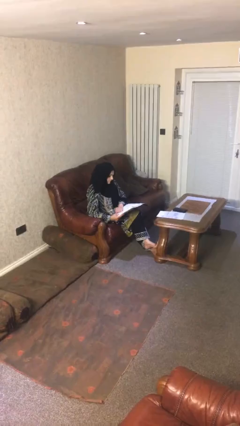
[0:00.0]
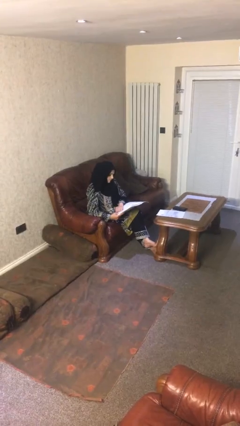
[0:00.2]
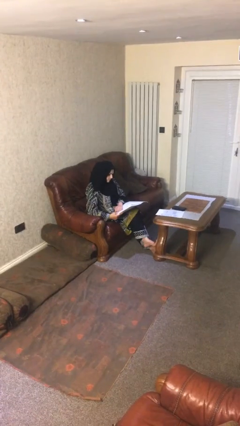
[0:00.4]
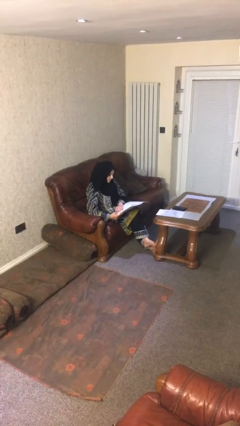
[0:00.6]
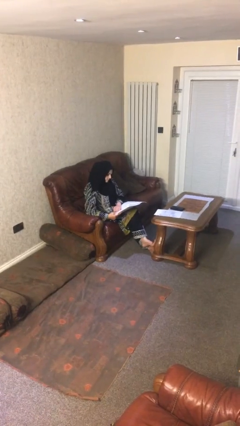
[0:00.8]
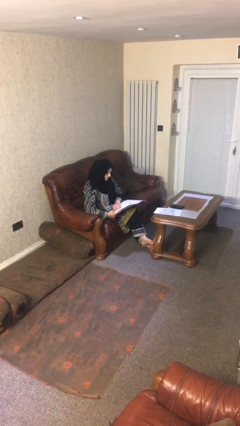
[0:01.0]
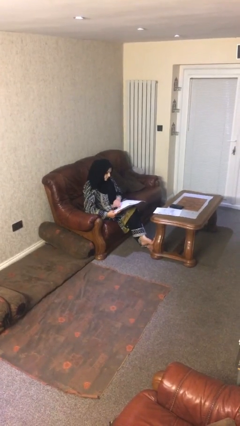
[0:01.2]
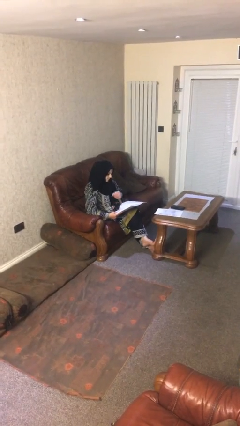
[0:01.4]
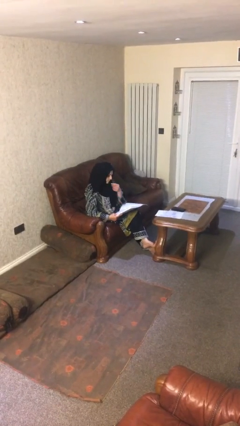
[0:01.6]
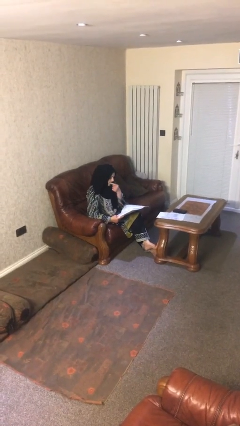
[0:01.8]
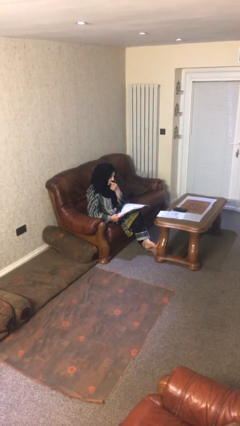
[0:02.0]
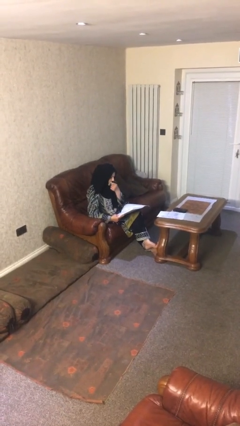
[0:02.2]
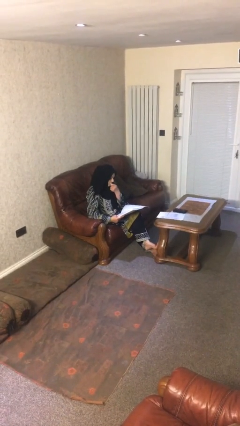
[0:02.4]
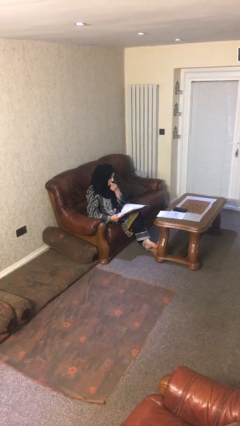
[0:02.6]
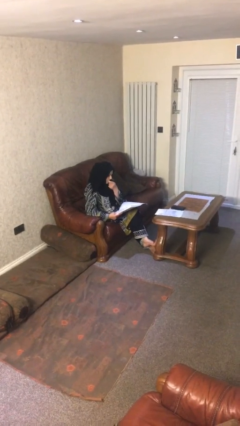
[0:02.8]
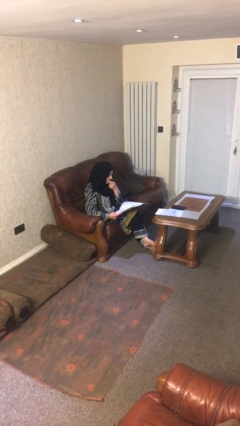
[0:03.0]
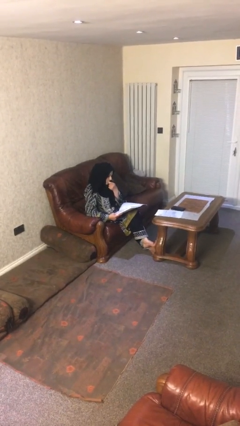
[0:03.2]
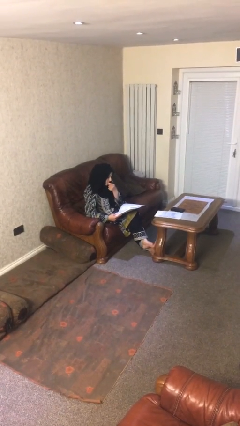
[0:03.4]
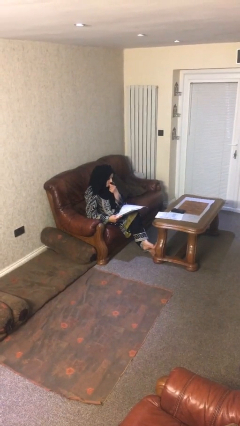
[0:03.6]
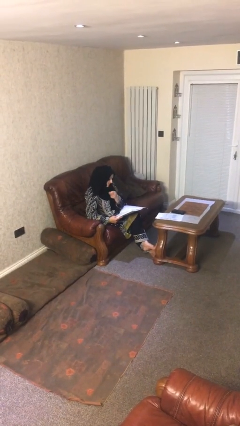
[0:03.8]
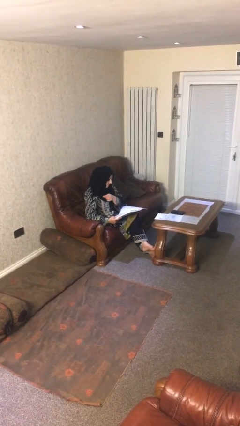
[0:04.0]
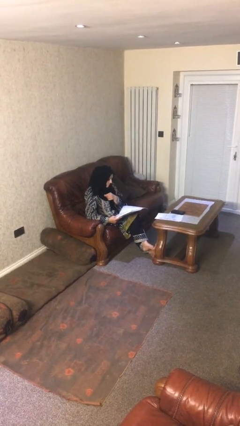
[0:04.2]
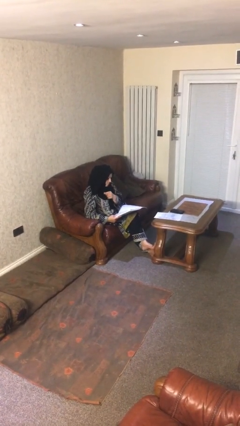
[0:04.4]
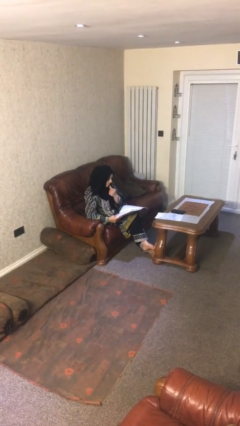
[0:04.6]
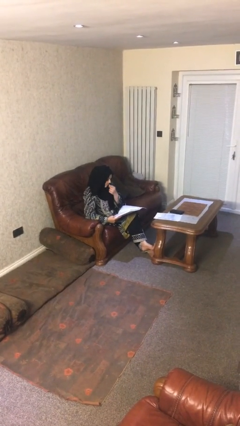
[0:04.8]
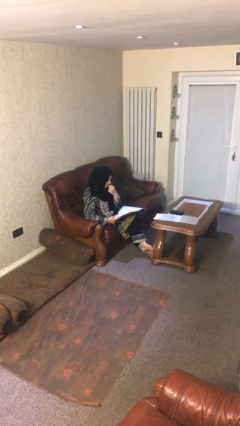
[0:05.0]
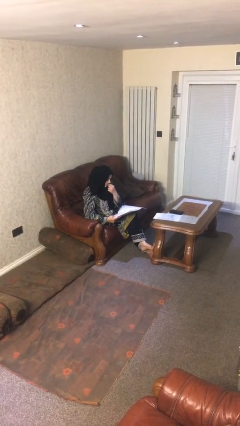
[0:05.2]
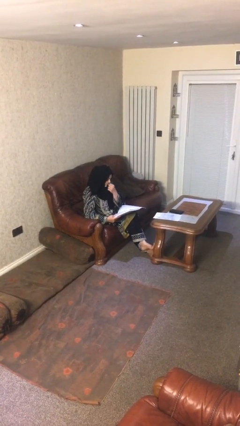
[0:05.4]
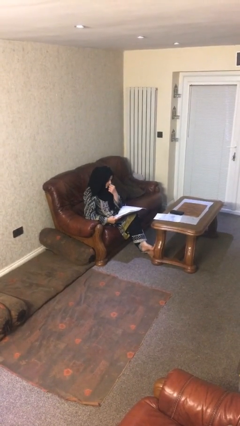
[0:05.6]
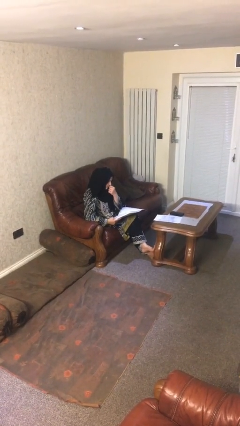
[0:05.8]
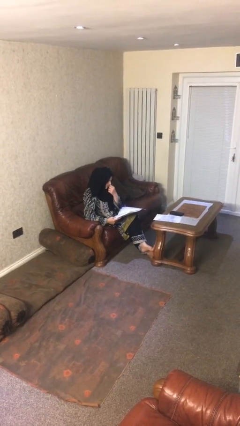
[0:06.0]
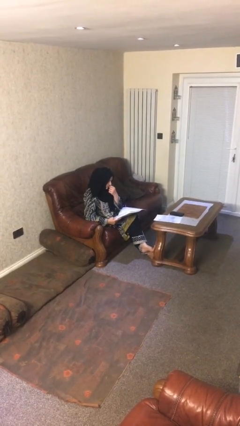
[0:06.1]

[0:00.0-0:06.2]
person reads document

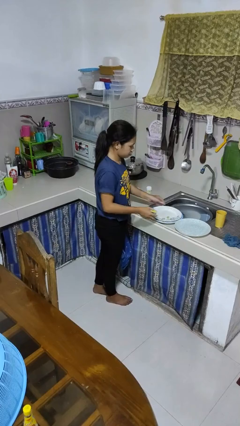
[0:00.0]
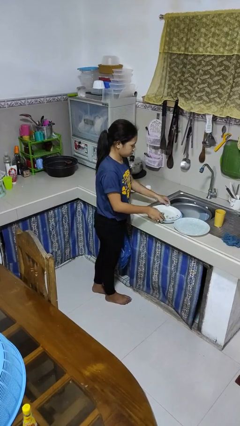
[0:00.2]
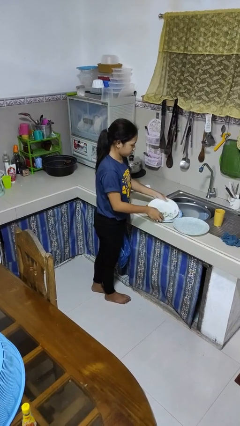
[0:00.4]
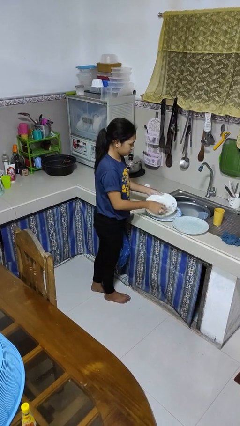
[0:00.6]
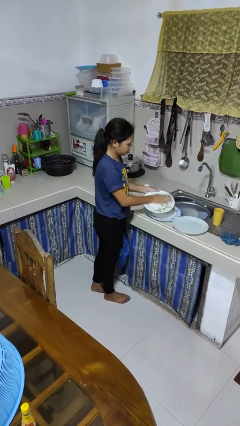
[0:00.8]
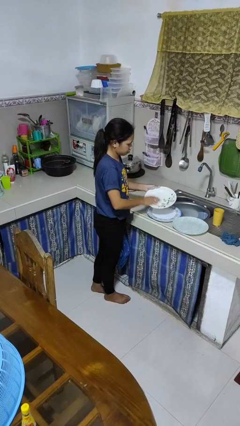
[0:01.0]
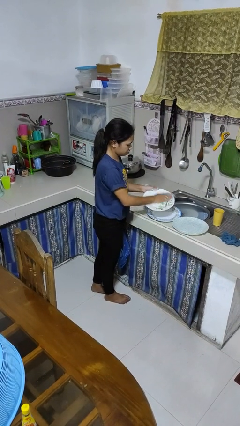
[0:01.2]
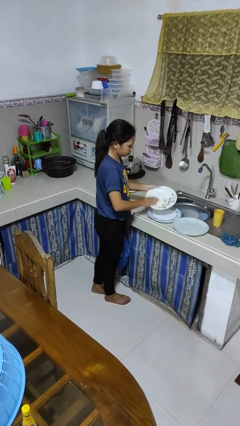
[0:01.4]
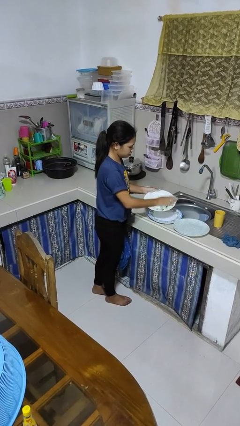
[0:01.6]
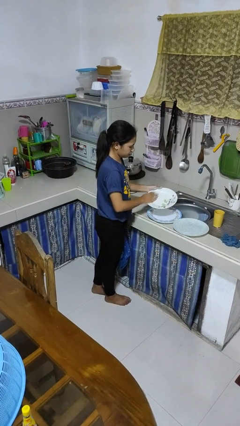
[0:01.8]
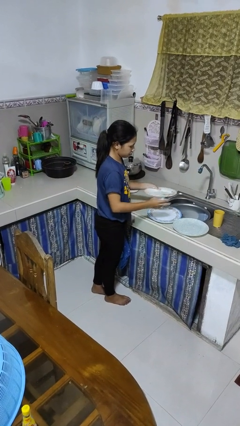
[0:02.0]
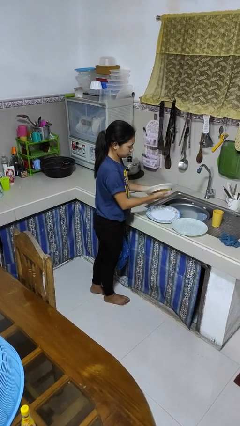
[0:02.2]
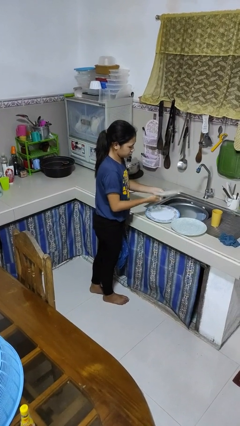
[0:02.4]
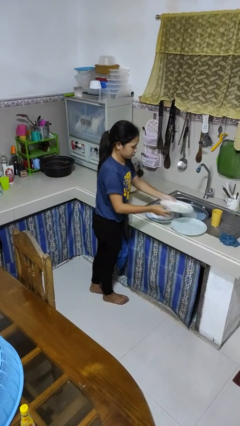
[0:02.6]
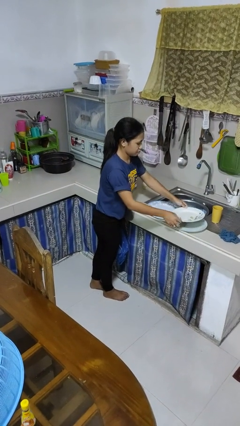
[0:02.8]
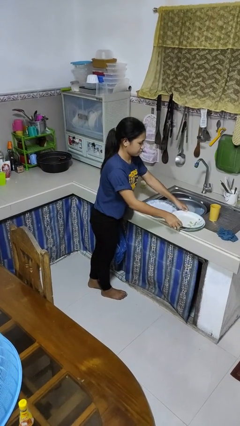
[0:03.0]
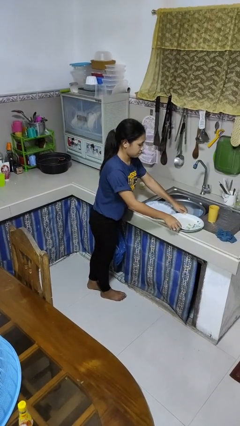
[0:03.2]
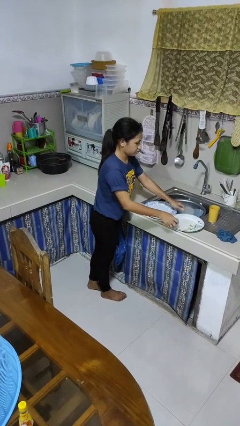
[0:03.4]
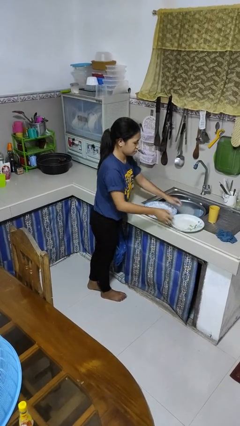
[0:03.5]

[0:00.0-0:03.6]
person washes dish

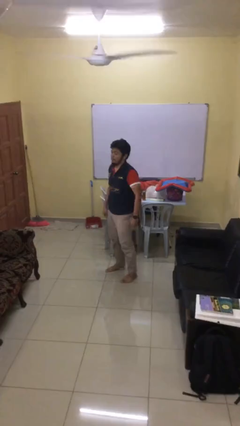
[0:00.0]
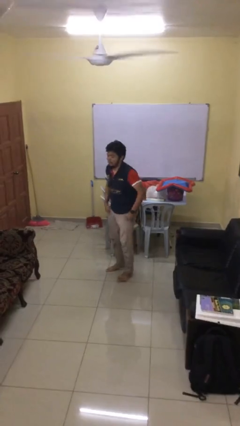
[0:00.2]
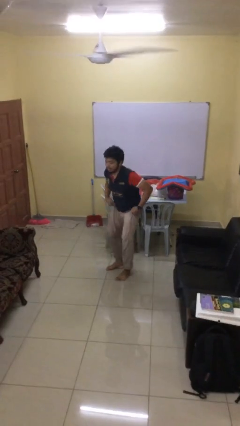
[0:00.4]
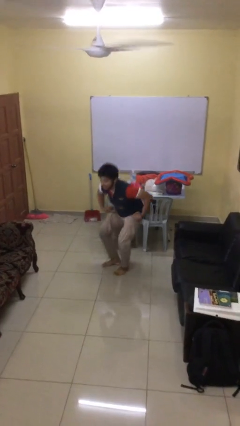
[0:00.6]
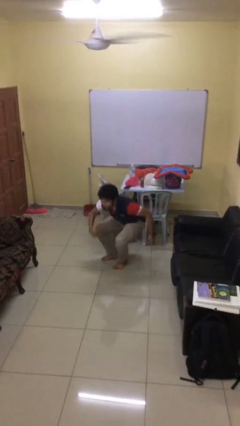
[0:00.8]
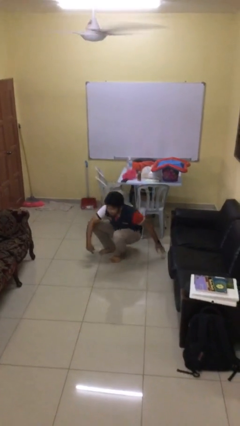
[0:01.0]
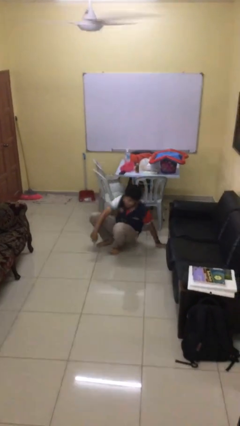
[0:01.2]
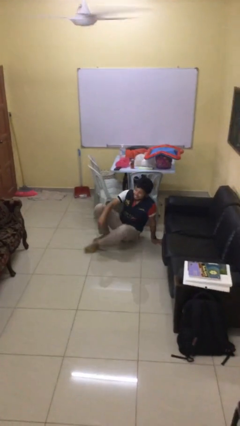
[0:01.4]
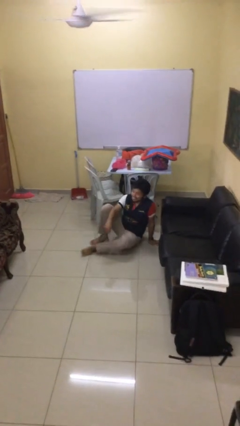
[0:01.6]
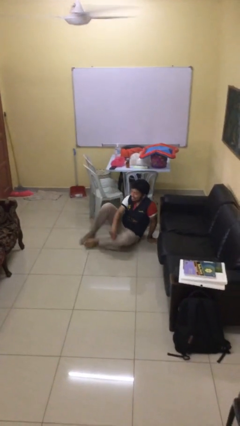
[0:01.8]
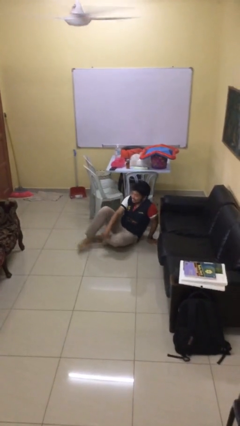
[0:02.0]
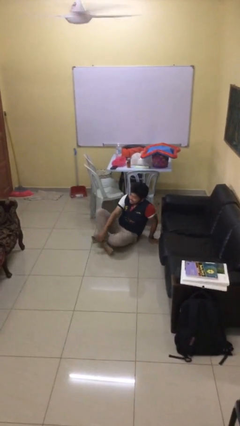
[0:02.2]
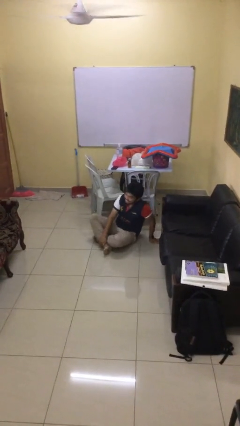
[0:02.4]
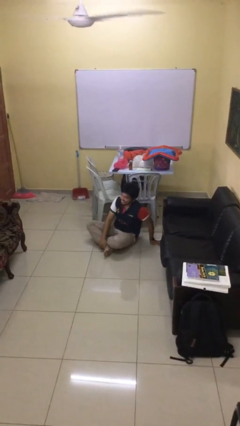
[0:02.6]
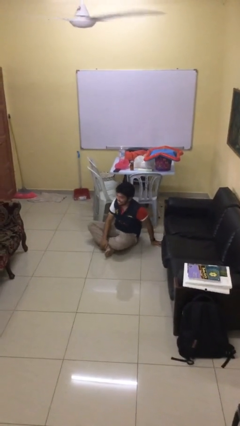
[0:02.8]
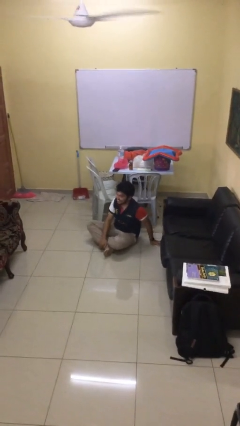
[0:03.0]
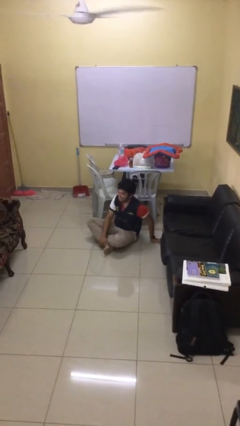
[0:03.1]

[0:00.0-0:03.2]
person sits crisscross

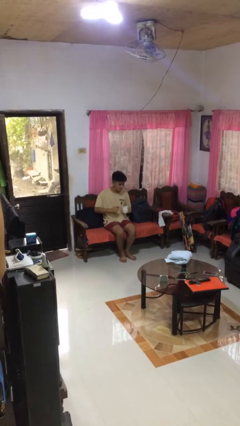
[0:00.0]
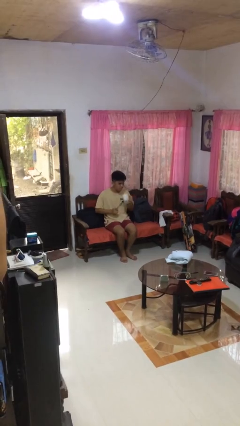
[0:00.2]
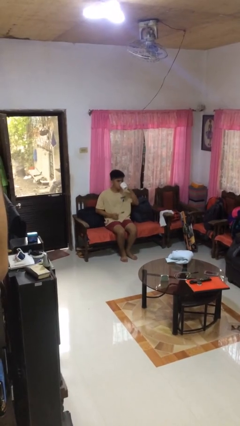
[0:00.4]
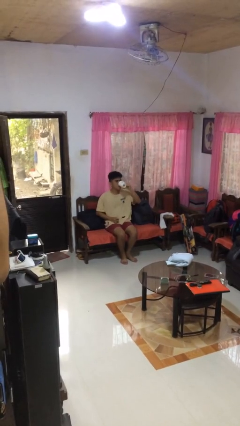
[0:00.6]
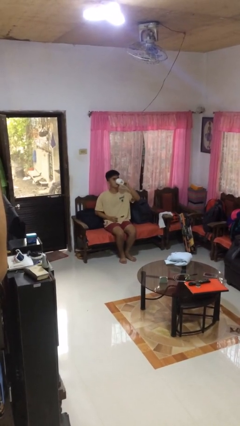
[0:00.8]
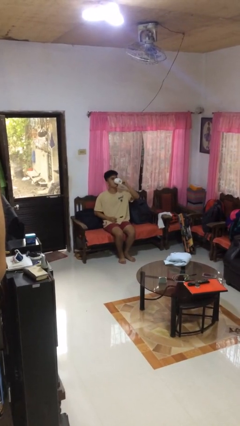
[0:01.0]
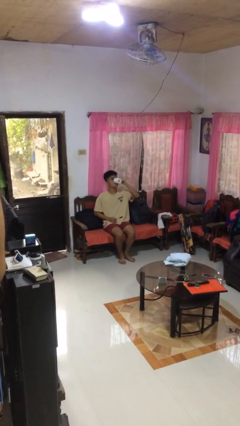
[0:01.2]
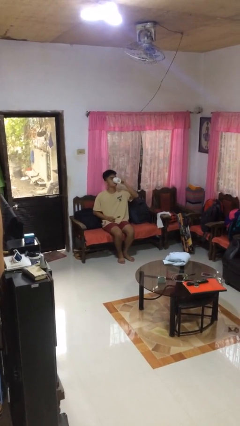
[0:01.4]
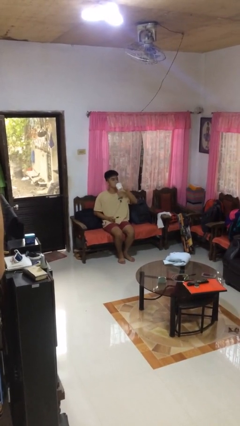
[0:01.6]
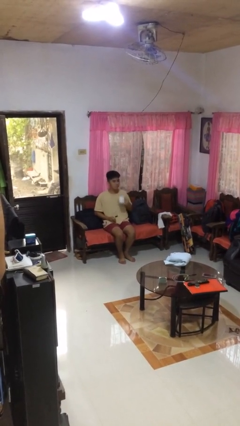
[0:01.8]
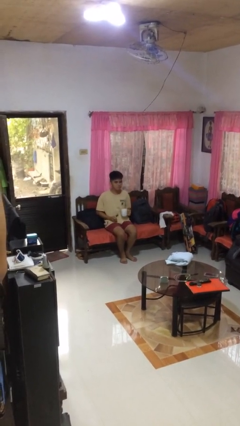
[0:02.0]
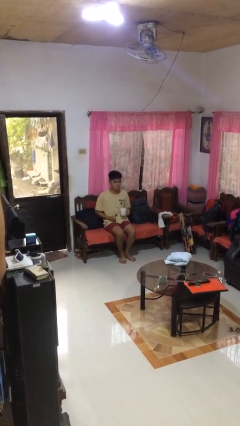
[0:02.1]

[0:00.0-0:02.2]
person drinks from mug

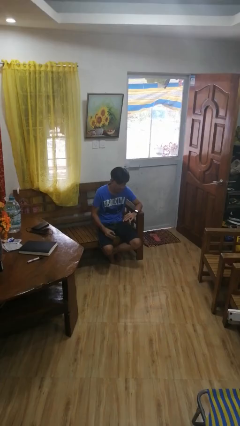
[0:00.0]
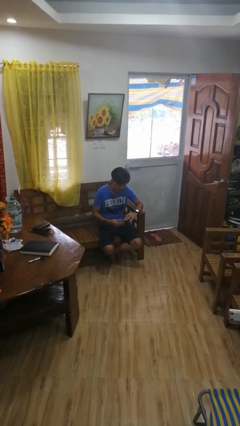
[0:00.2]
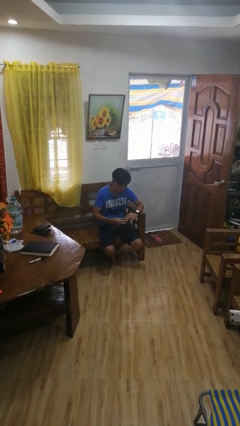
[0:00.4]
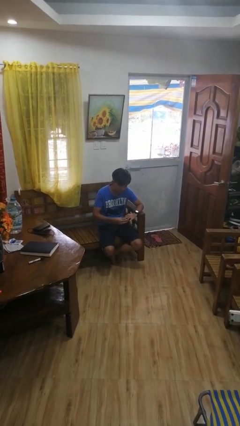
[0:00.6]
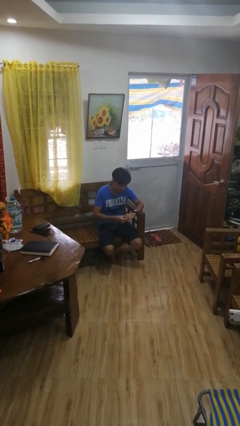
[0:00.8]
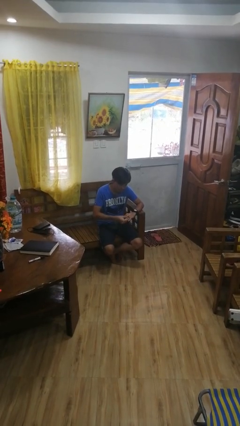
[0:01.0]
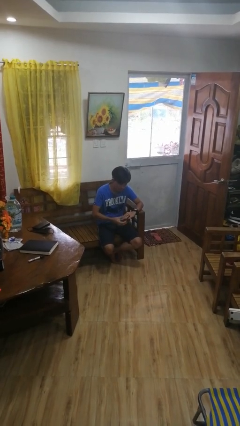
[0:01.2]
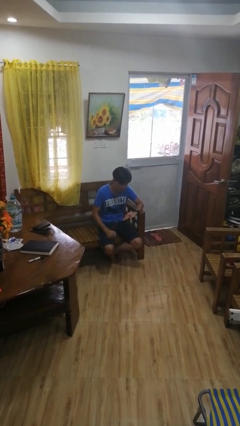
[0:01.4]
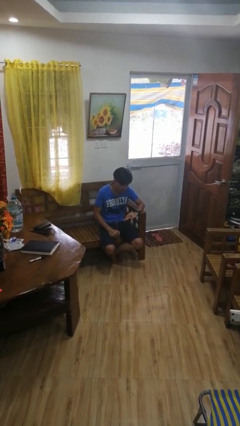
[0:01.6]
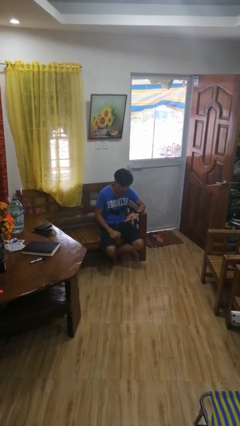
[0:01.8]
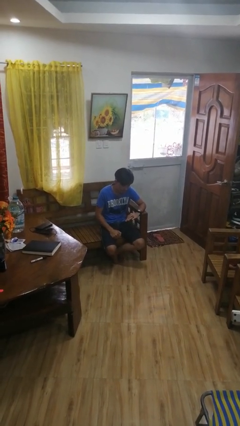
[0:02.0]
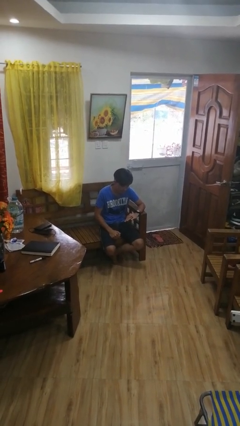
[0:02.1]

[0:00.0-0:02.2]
person puts on ring

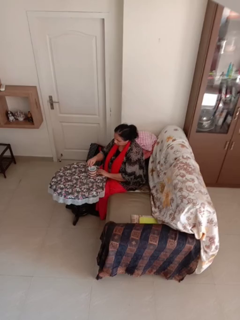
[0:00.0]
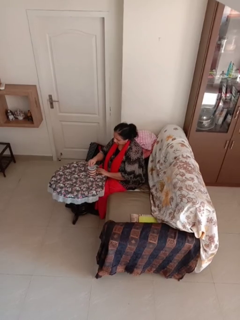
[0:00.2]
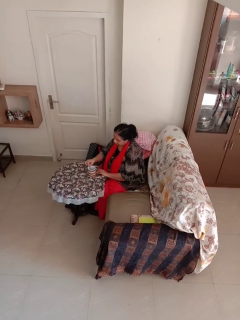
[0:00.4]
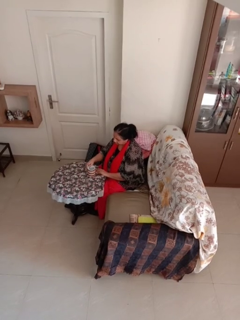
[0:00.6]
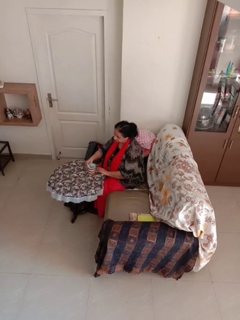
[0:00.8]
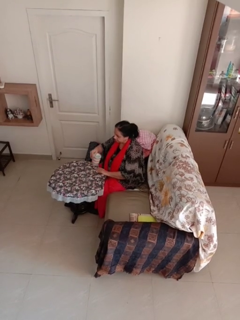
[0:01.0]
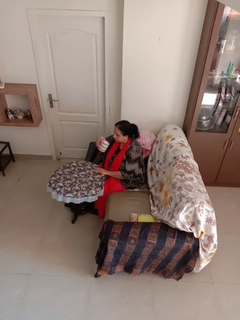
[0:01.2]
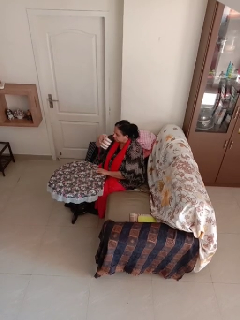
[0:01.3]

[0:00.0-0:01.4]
person stirs mug
